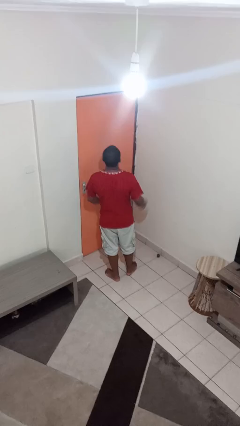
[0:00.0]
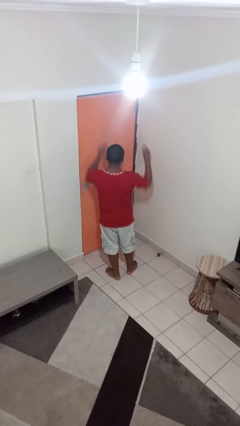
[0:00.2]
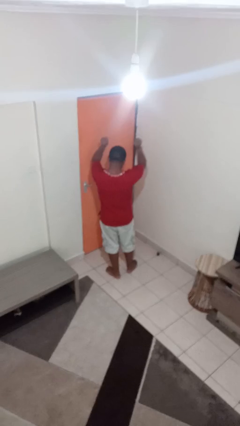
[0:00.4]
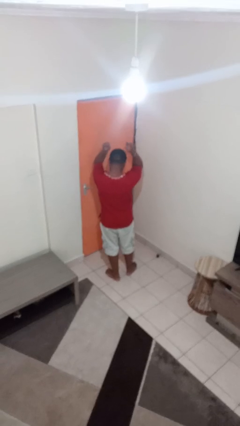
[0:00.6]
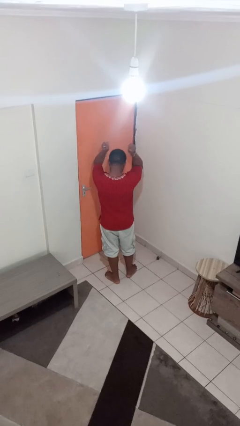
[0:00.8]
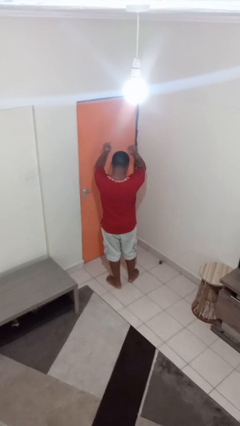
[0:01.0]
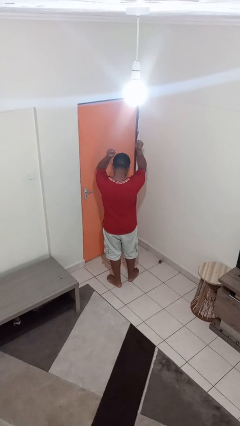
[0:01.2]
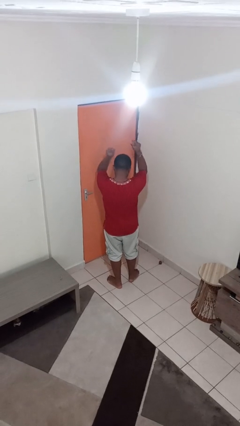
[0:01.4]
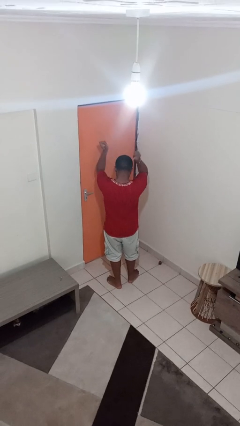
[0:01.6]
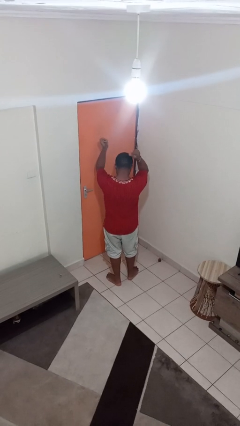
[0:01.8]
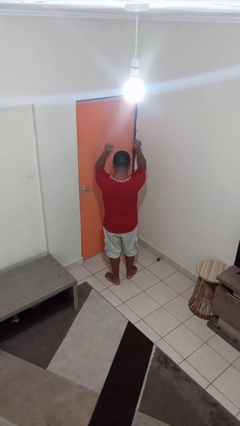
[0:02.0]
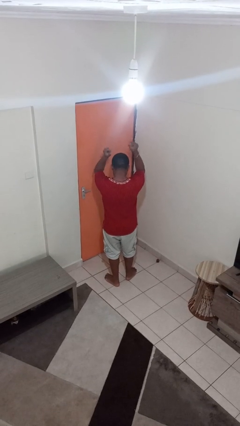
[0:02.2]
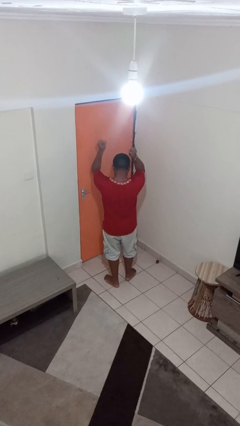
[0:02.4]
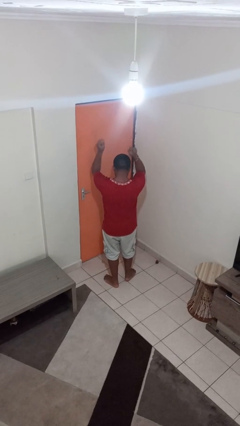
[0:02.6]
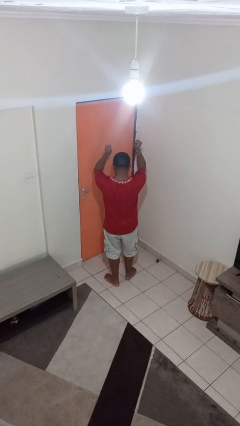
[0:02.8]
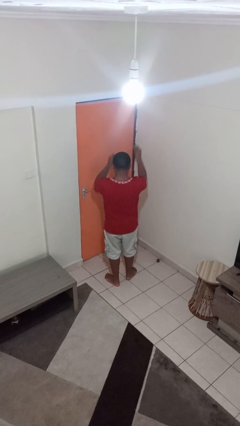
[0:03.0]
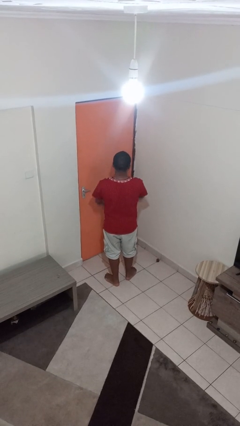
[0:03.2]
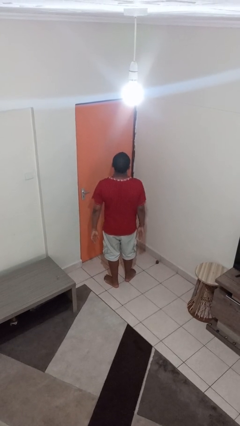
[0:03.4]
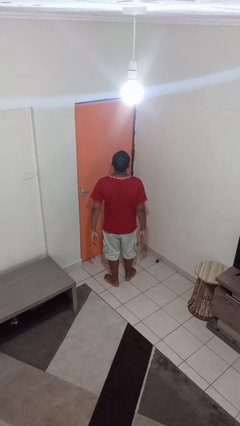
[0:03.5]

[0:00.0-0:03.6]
person snaps fingers

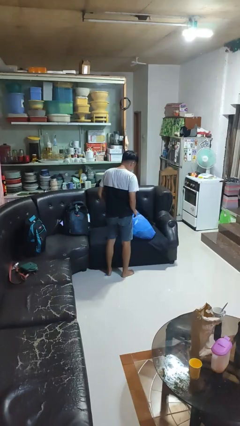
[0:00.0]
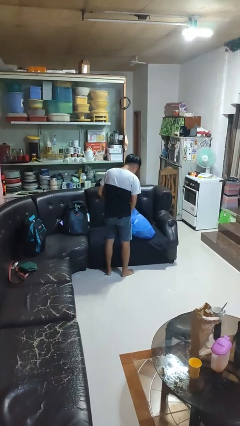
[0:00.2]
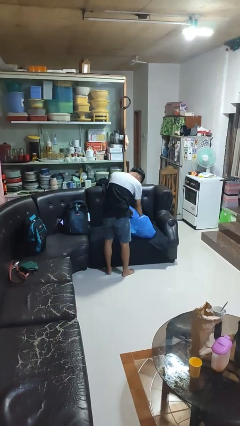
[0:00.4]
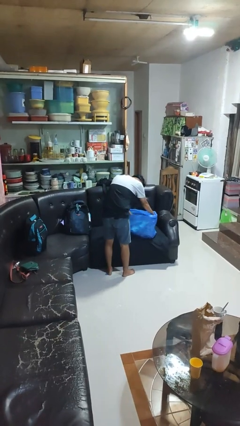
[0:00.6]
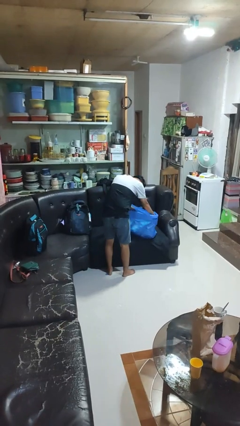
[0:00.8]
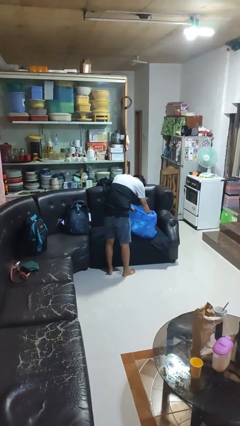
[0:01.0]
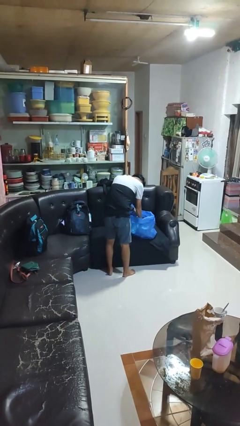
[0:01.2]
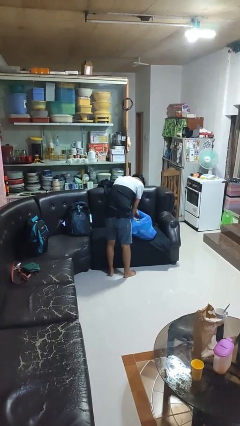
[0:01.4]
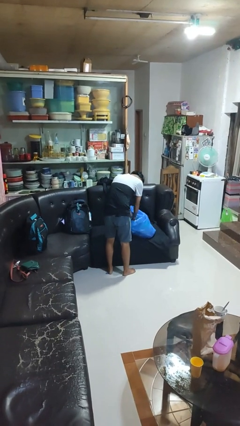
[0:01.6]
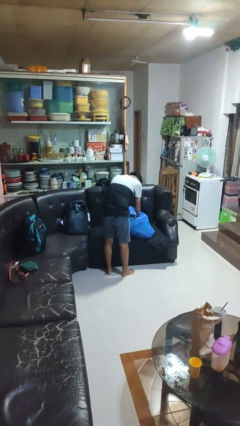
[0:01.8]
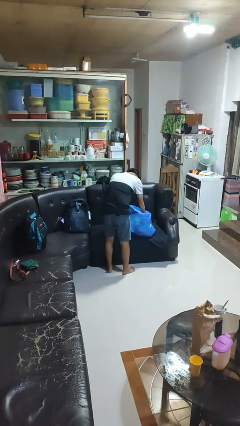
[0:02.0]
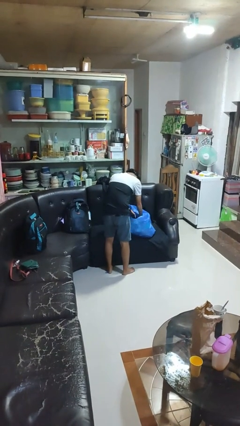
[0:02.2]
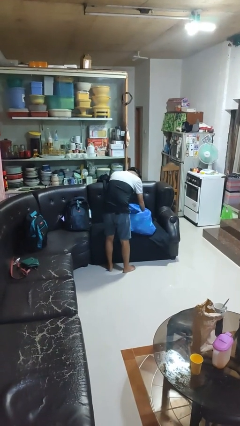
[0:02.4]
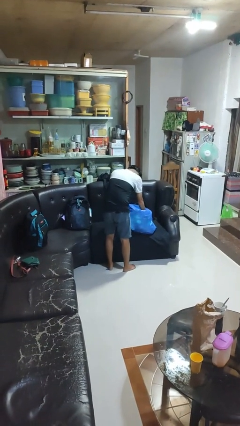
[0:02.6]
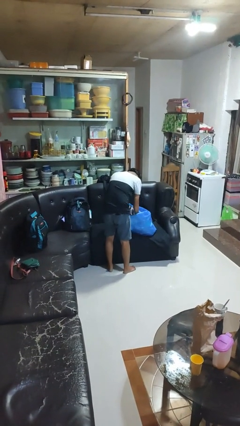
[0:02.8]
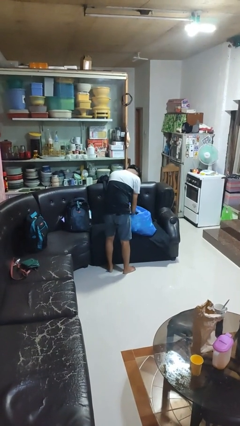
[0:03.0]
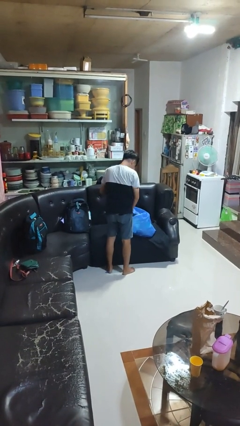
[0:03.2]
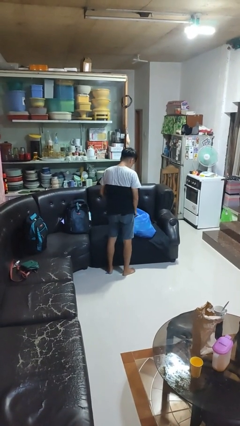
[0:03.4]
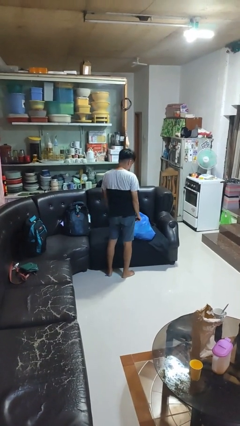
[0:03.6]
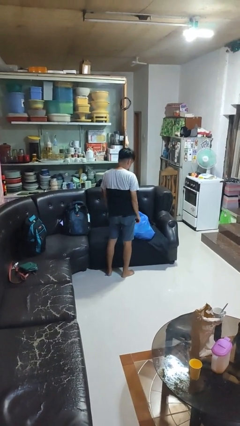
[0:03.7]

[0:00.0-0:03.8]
person searches in bag

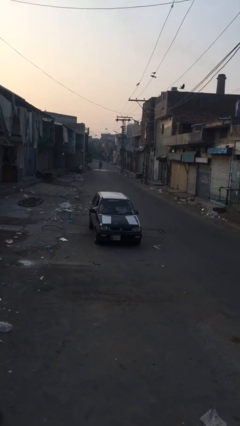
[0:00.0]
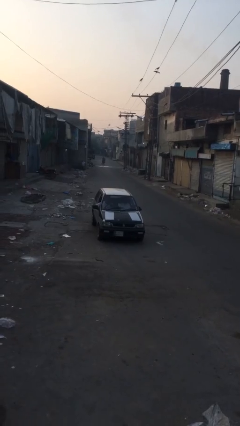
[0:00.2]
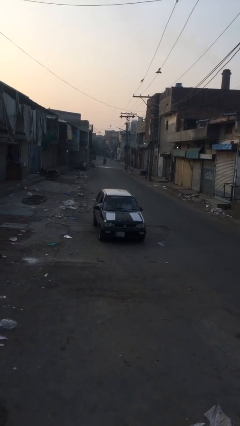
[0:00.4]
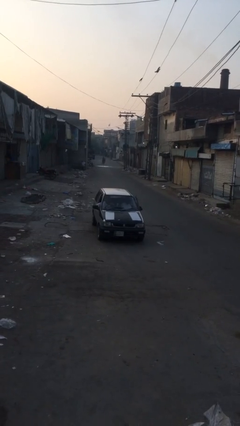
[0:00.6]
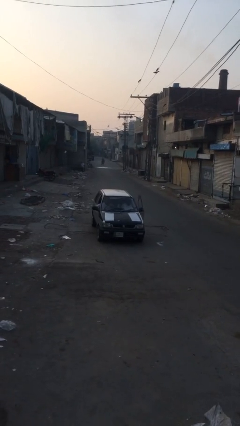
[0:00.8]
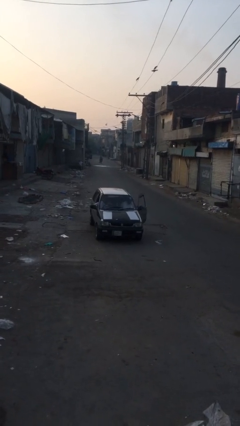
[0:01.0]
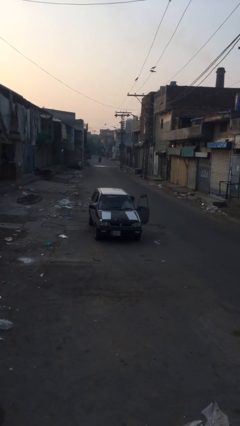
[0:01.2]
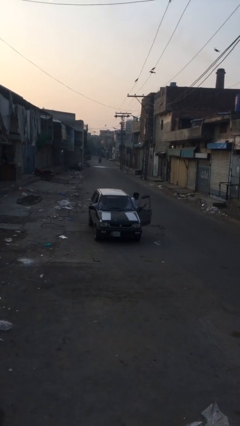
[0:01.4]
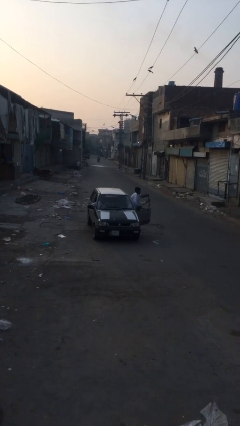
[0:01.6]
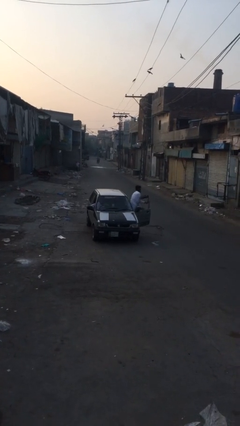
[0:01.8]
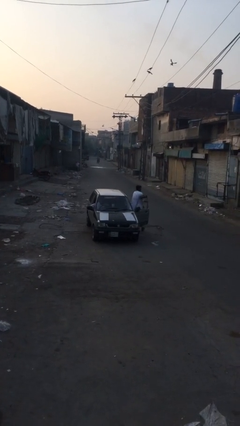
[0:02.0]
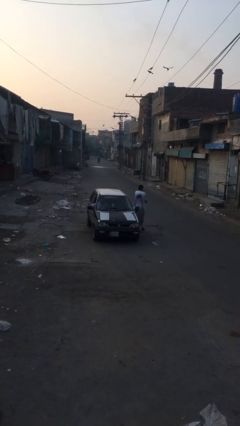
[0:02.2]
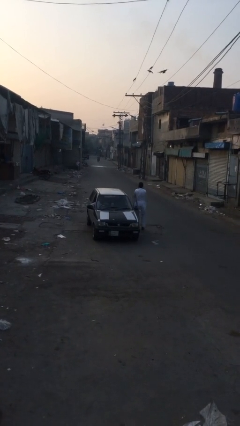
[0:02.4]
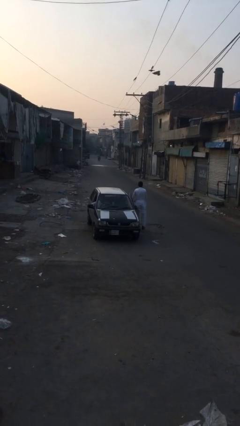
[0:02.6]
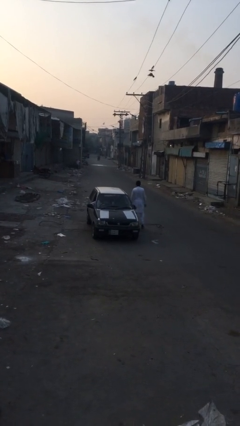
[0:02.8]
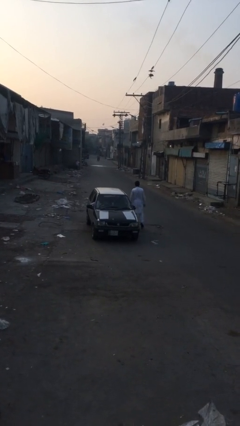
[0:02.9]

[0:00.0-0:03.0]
car drops off person

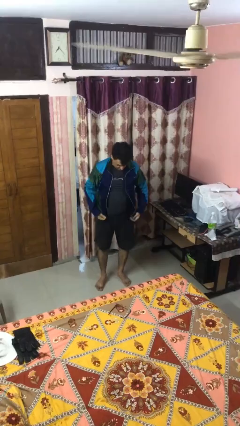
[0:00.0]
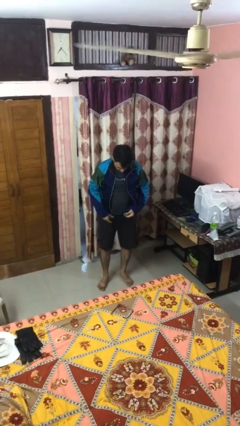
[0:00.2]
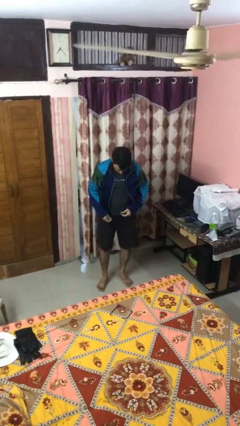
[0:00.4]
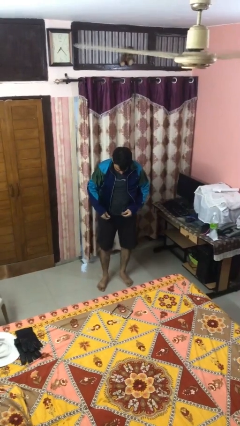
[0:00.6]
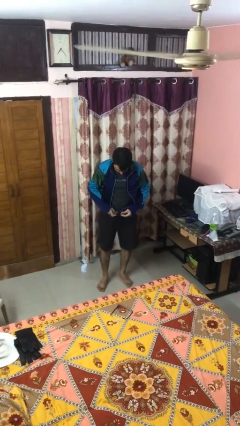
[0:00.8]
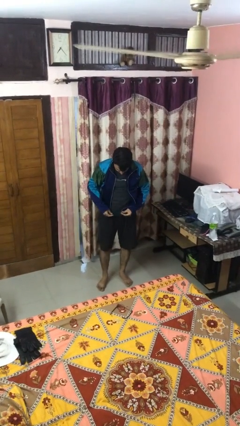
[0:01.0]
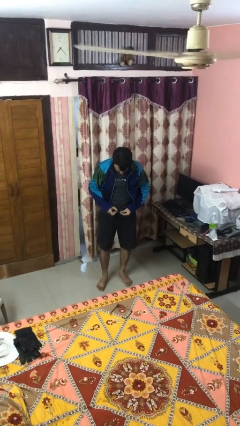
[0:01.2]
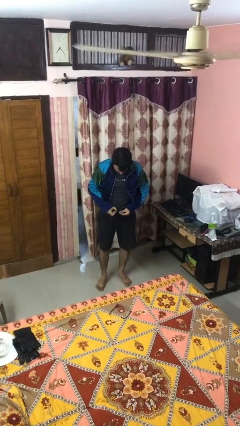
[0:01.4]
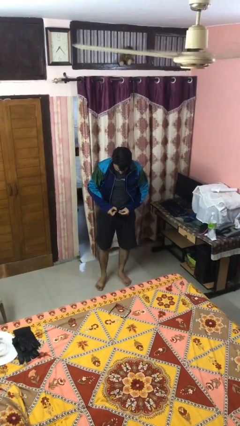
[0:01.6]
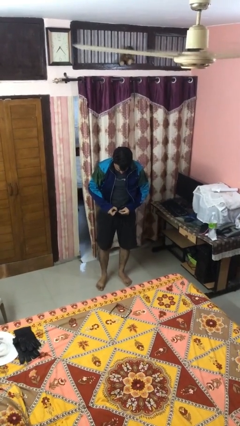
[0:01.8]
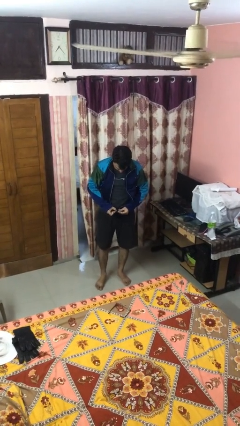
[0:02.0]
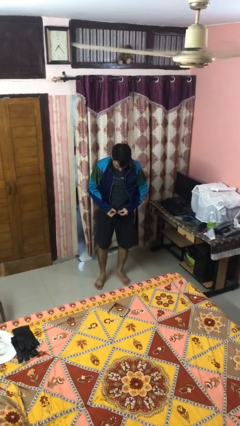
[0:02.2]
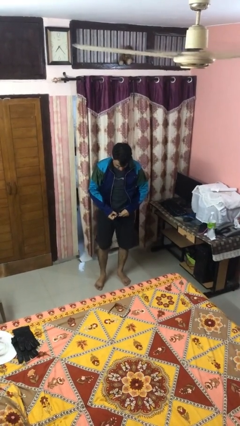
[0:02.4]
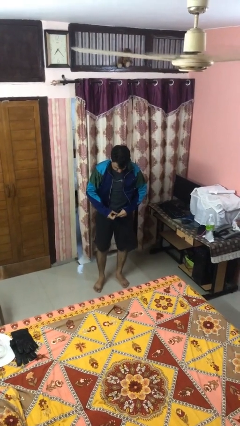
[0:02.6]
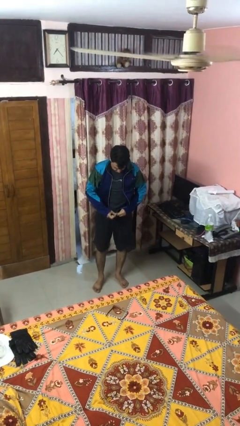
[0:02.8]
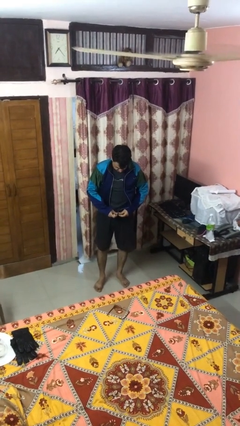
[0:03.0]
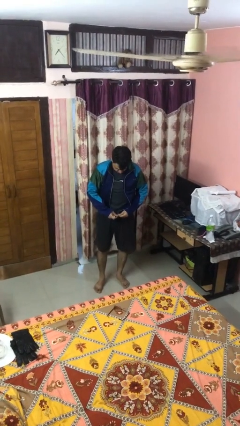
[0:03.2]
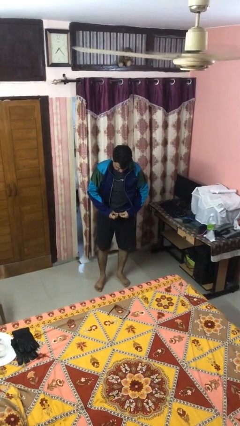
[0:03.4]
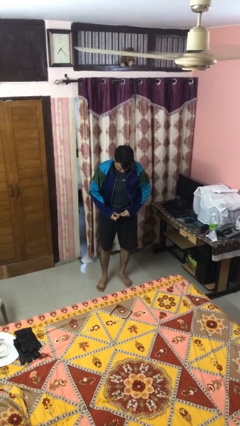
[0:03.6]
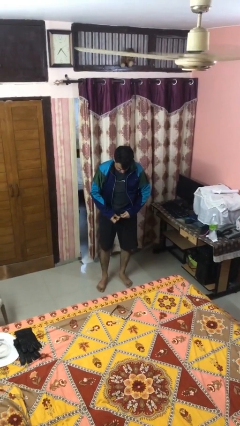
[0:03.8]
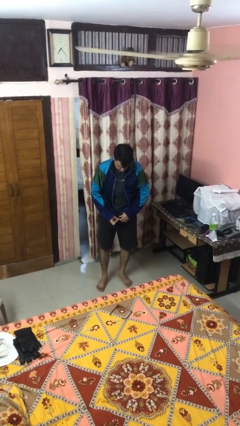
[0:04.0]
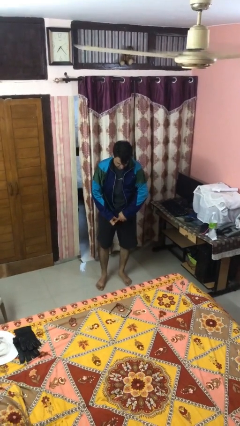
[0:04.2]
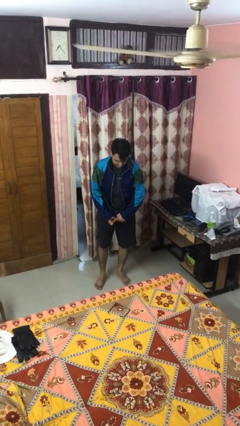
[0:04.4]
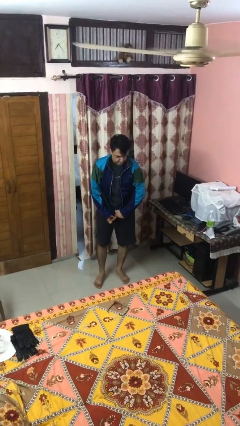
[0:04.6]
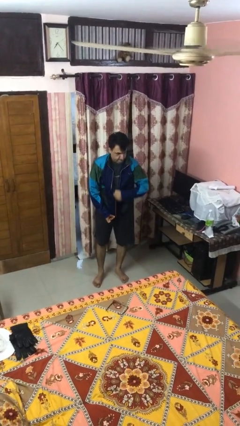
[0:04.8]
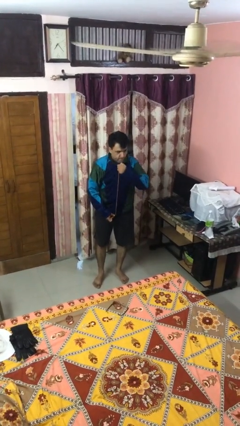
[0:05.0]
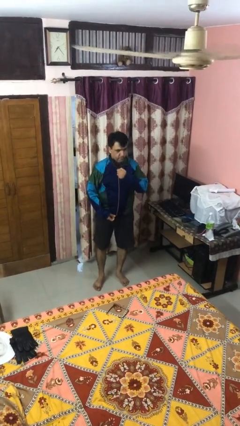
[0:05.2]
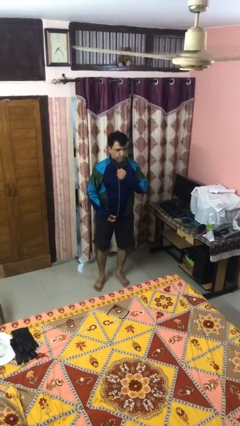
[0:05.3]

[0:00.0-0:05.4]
person zips up jacket

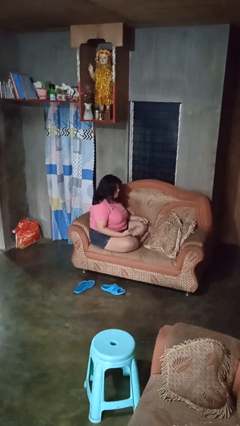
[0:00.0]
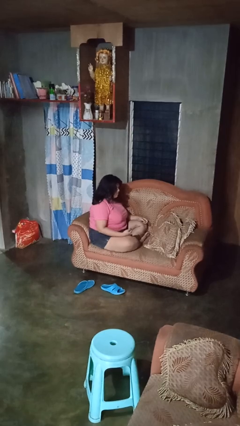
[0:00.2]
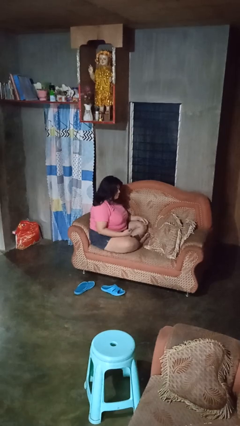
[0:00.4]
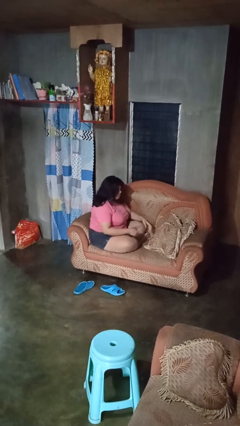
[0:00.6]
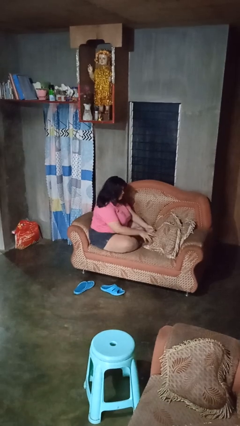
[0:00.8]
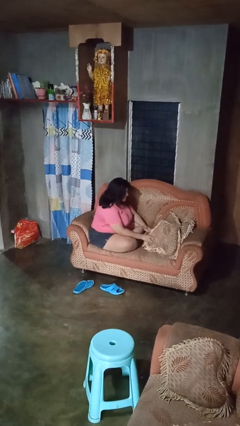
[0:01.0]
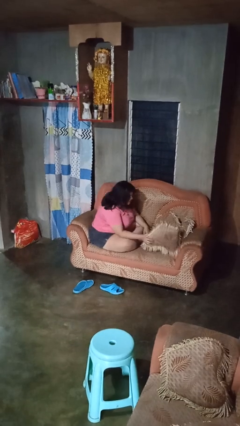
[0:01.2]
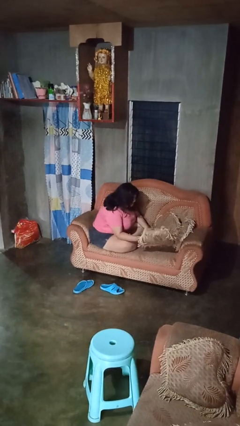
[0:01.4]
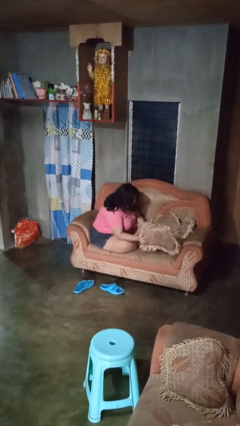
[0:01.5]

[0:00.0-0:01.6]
person searches in couch
